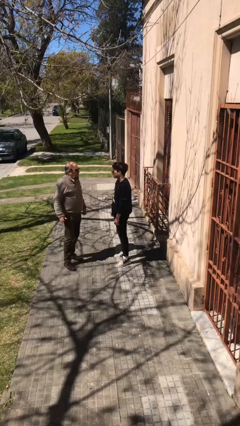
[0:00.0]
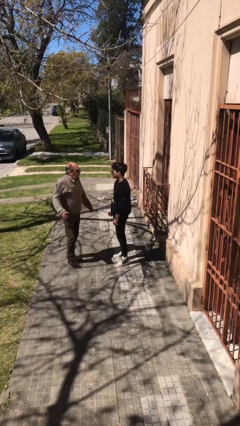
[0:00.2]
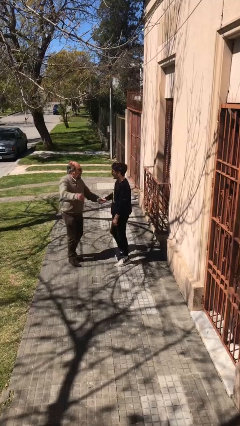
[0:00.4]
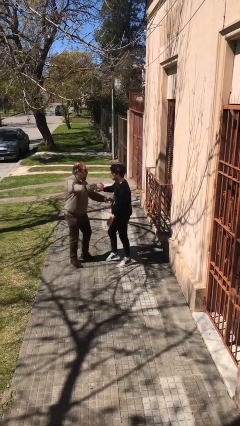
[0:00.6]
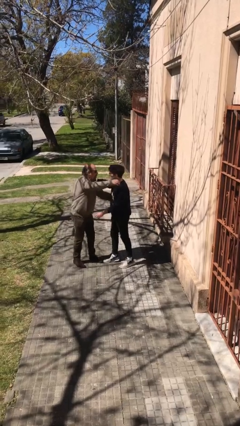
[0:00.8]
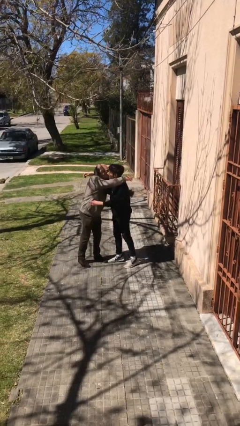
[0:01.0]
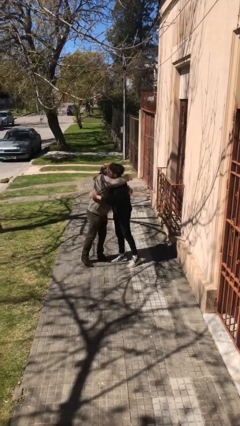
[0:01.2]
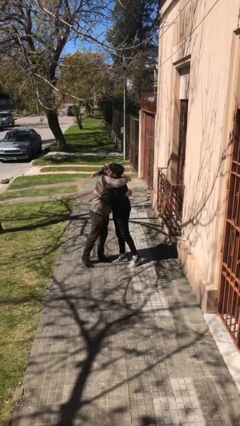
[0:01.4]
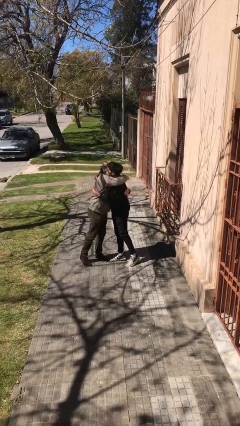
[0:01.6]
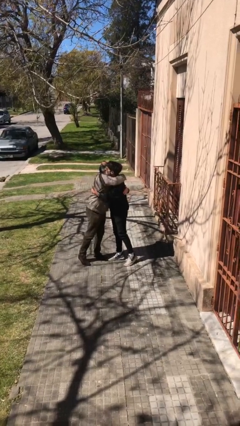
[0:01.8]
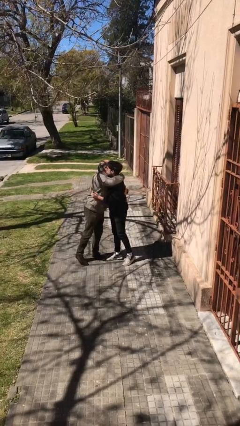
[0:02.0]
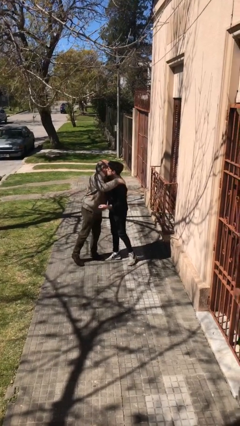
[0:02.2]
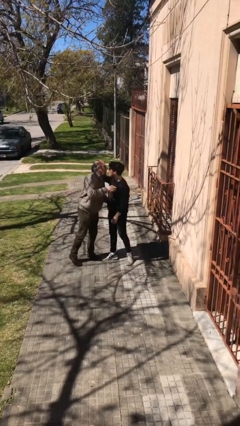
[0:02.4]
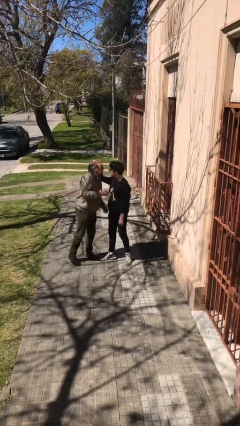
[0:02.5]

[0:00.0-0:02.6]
person embraces person

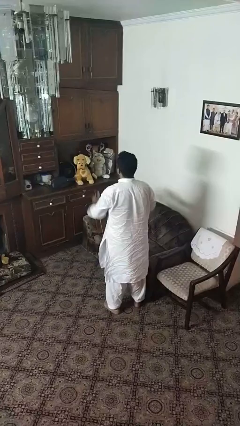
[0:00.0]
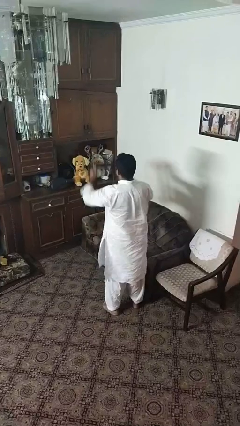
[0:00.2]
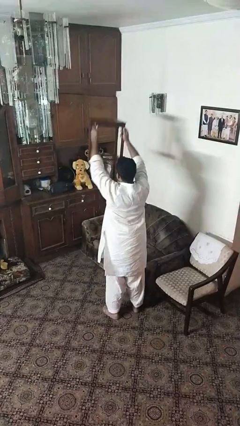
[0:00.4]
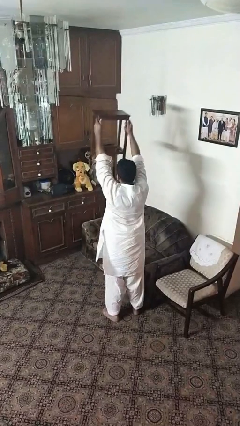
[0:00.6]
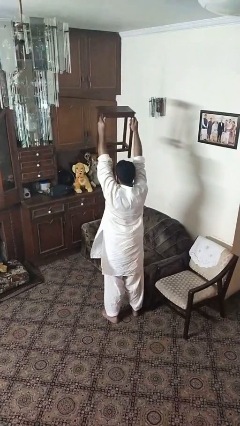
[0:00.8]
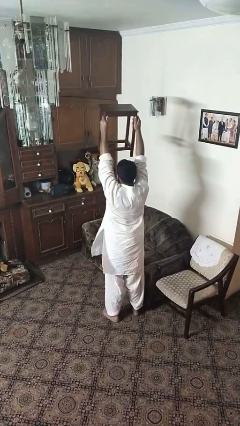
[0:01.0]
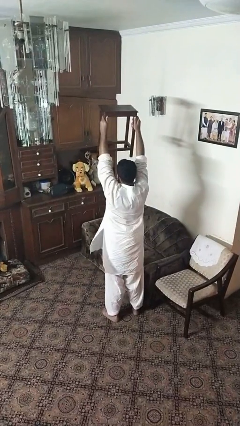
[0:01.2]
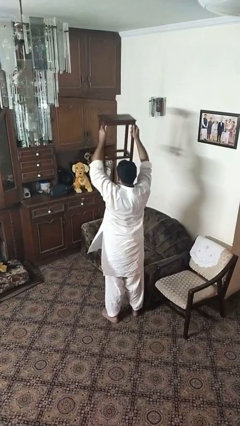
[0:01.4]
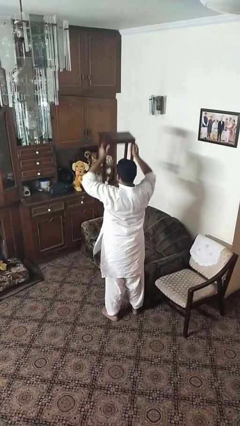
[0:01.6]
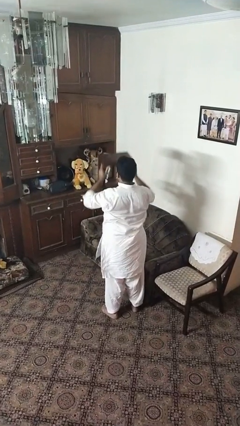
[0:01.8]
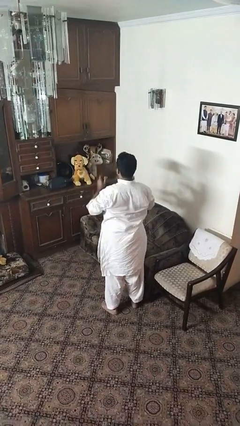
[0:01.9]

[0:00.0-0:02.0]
person holds object above head

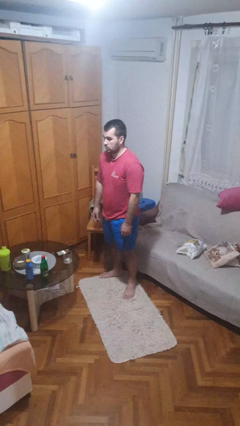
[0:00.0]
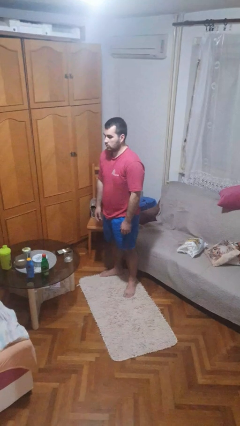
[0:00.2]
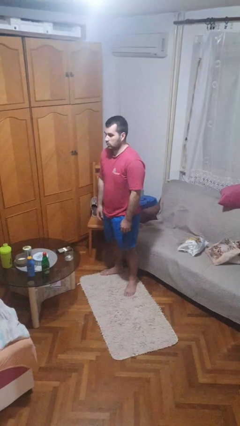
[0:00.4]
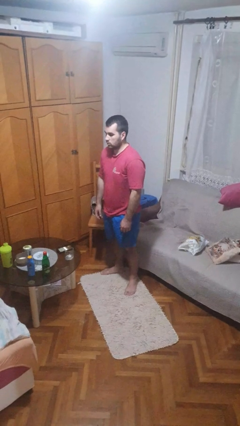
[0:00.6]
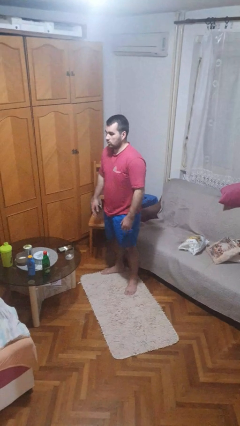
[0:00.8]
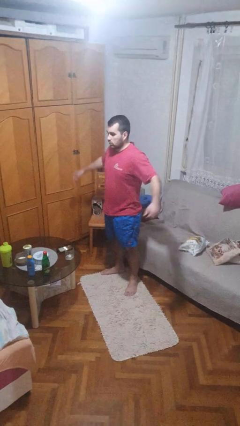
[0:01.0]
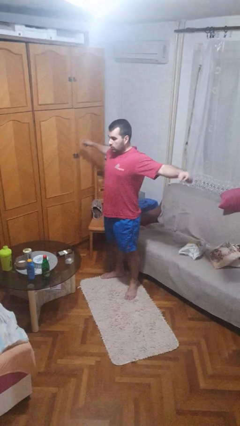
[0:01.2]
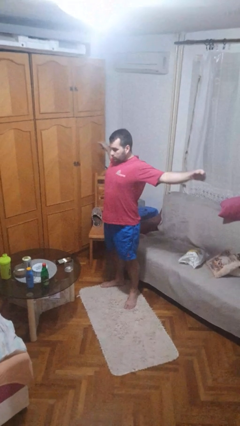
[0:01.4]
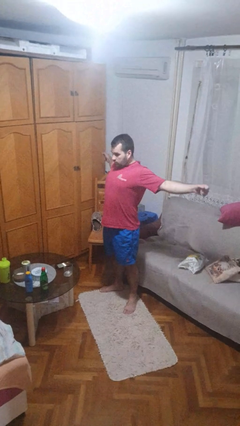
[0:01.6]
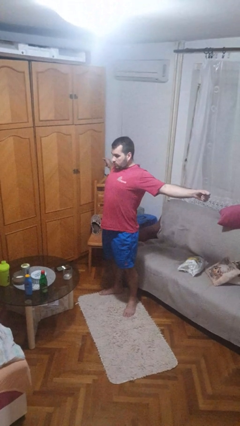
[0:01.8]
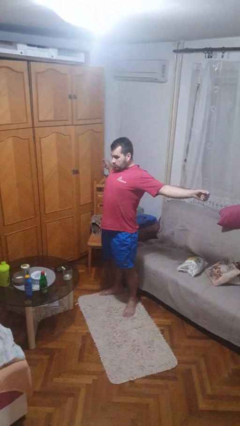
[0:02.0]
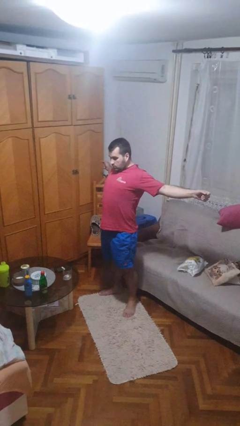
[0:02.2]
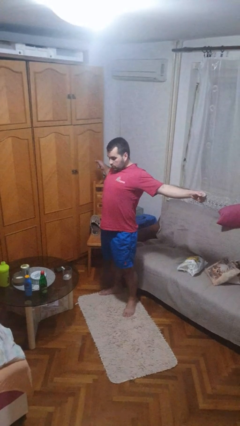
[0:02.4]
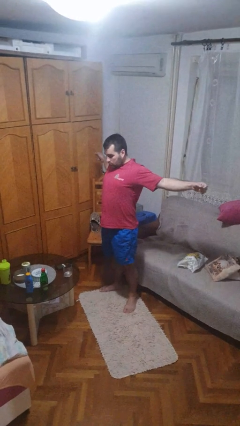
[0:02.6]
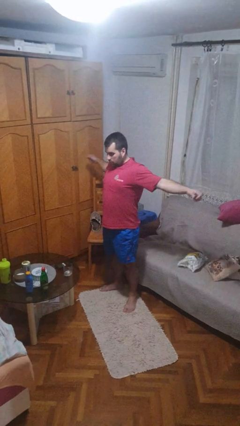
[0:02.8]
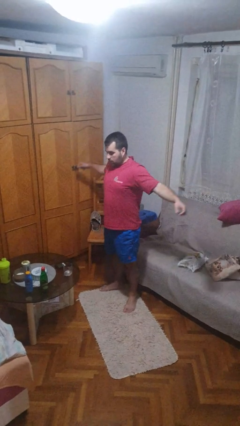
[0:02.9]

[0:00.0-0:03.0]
person stretches arms to side

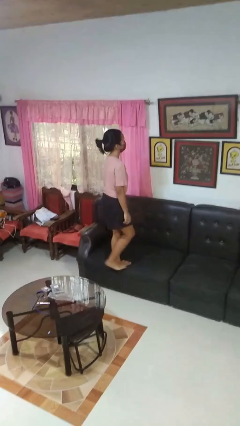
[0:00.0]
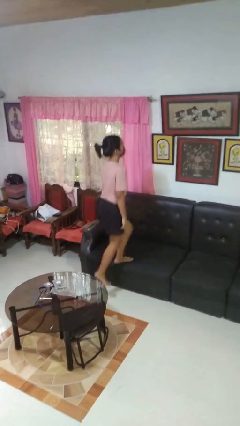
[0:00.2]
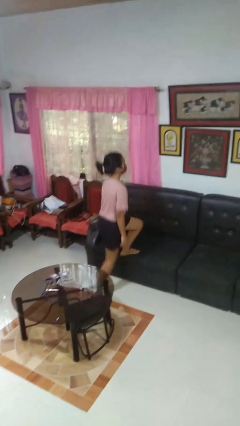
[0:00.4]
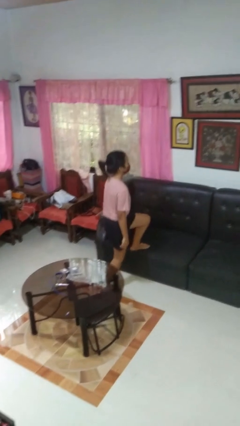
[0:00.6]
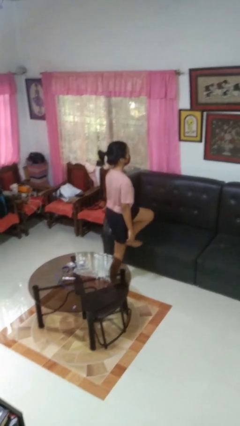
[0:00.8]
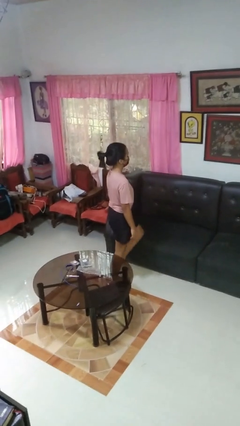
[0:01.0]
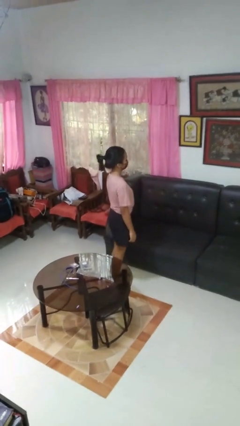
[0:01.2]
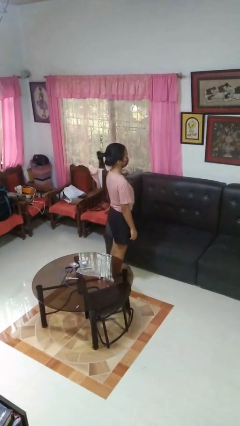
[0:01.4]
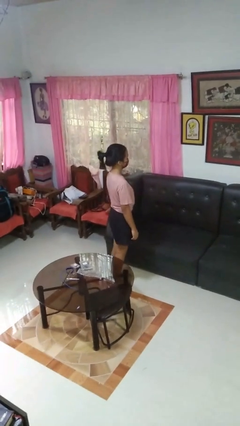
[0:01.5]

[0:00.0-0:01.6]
person climbs off couch

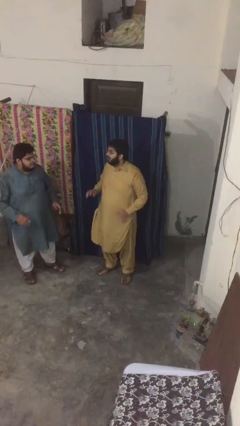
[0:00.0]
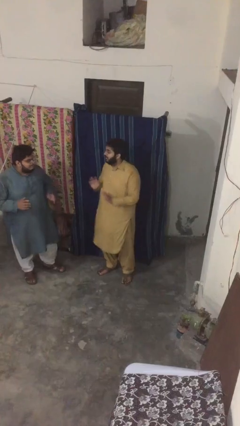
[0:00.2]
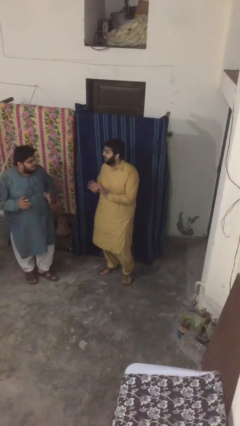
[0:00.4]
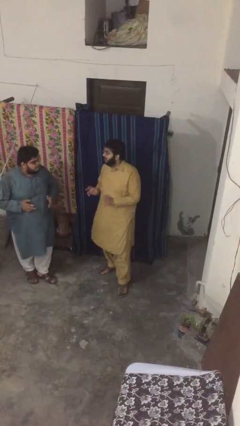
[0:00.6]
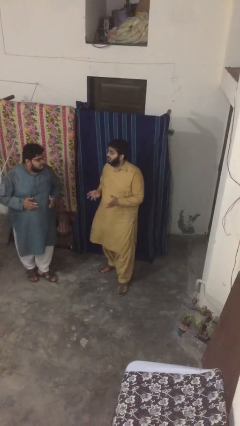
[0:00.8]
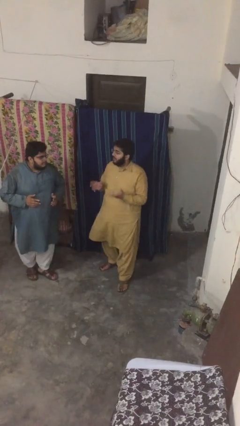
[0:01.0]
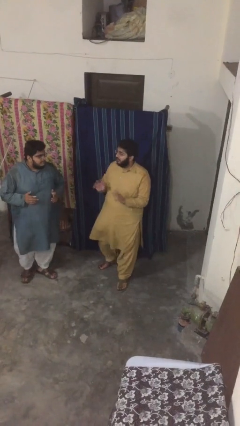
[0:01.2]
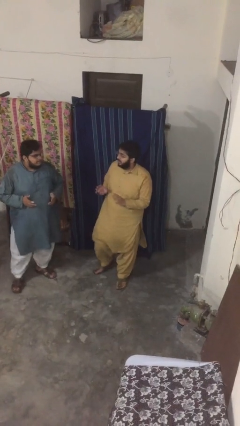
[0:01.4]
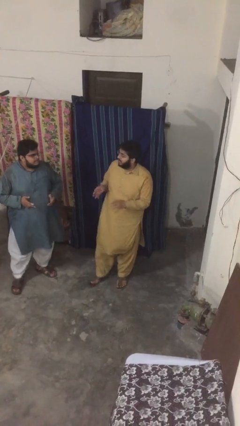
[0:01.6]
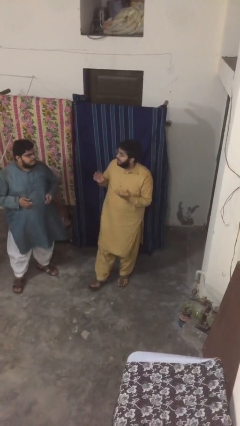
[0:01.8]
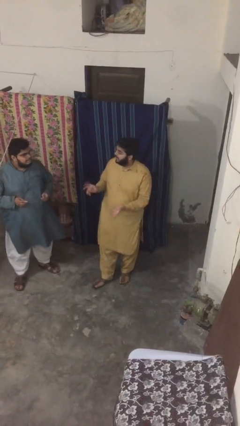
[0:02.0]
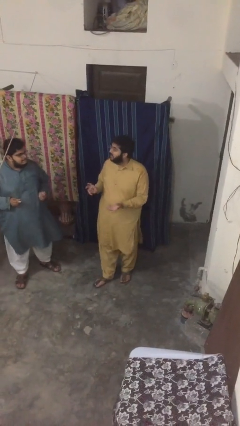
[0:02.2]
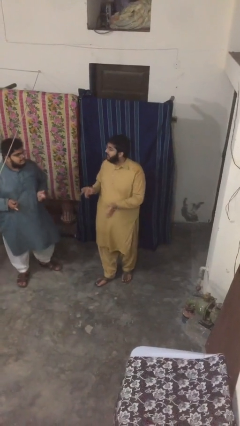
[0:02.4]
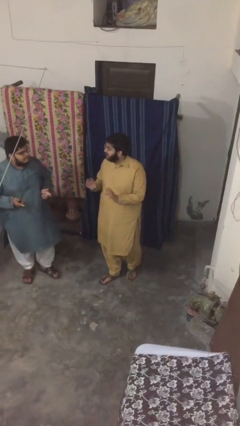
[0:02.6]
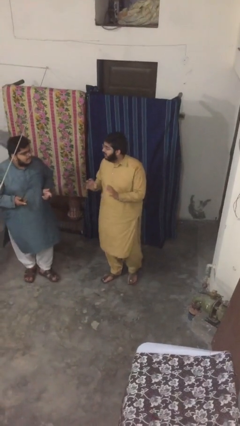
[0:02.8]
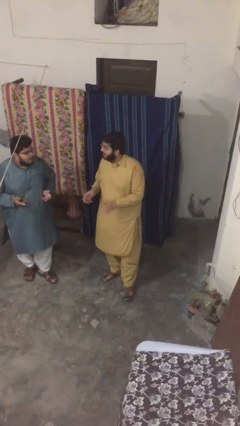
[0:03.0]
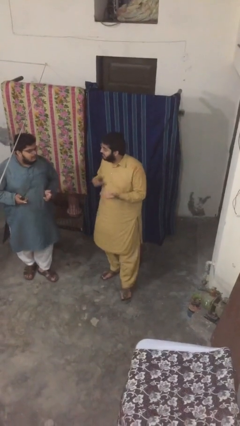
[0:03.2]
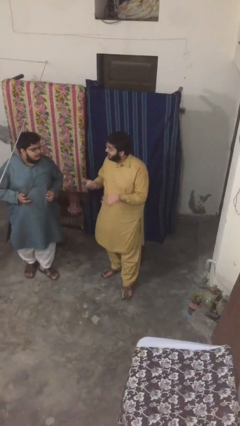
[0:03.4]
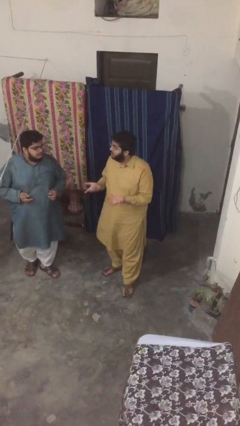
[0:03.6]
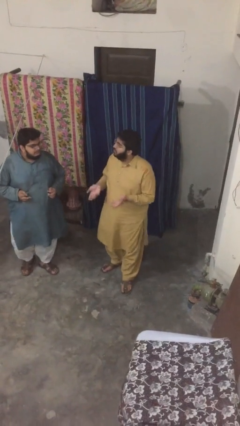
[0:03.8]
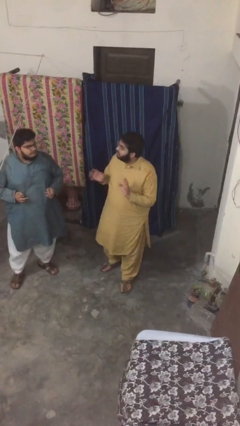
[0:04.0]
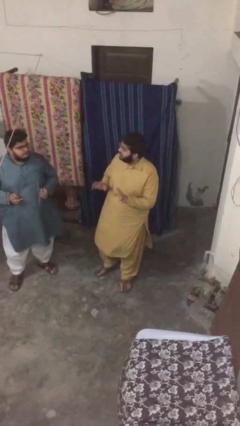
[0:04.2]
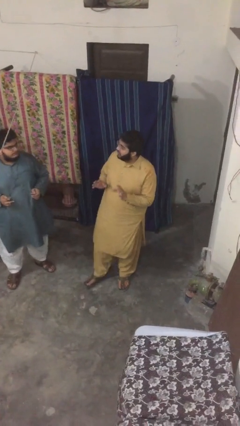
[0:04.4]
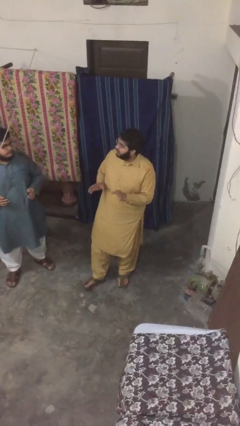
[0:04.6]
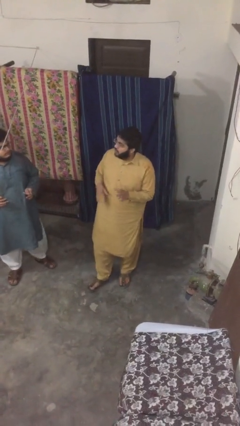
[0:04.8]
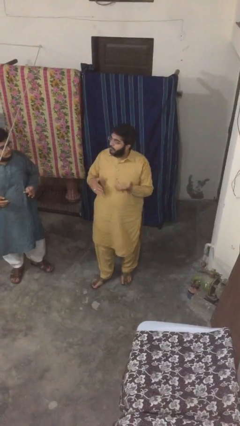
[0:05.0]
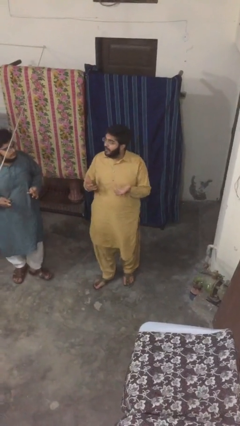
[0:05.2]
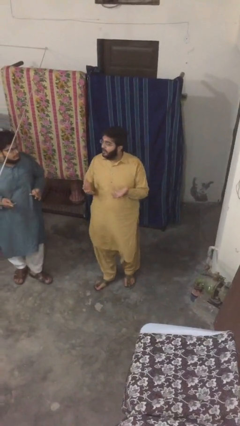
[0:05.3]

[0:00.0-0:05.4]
person talks to person

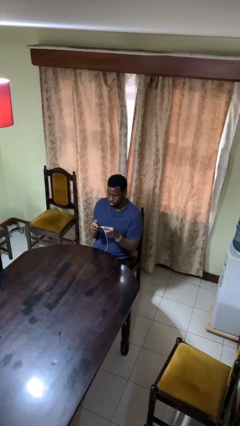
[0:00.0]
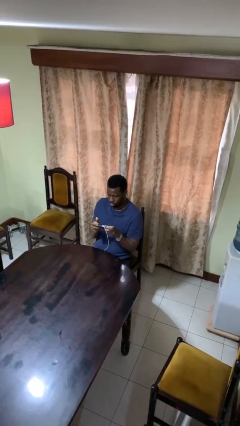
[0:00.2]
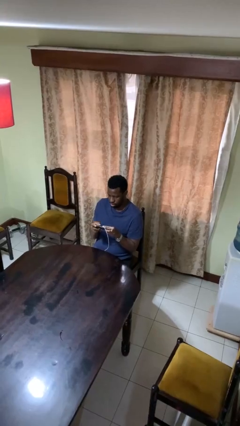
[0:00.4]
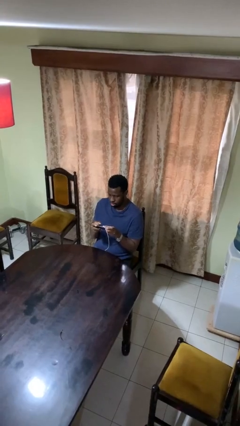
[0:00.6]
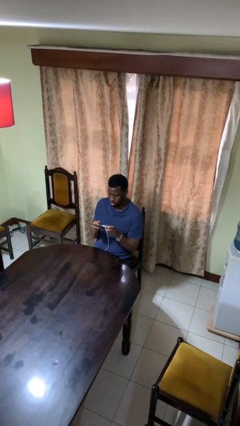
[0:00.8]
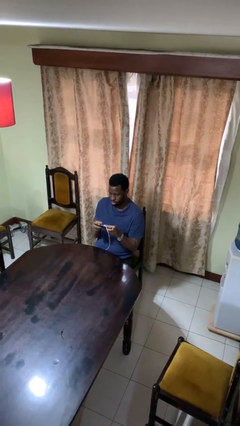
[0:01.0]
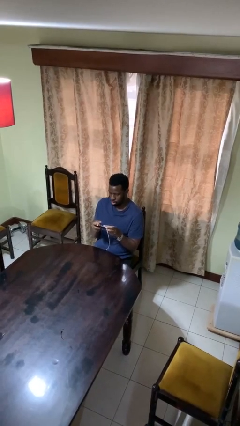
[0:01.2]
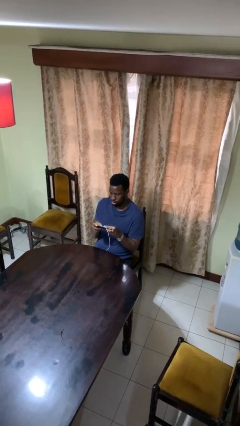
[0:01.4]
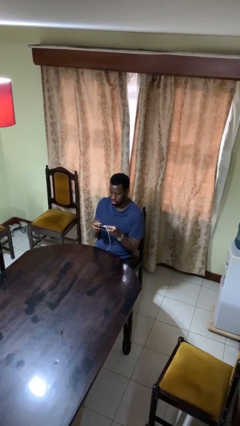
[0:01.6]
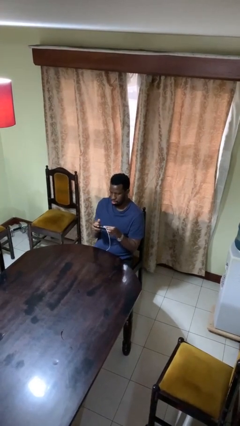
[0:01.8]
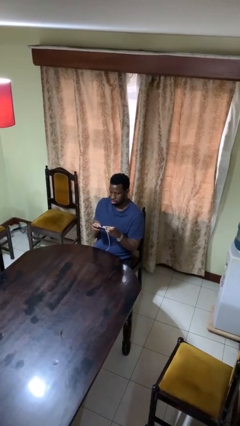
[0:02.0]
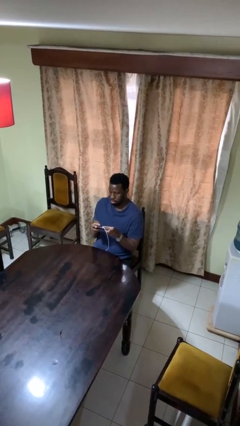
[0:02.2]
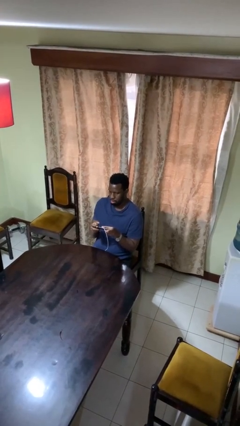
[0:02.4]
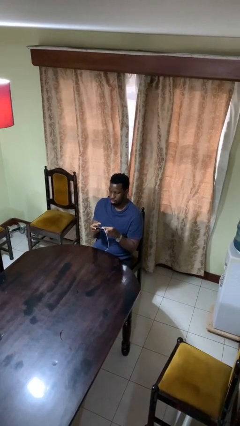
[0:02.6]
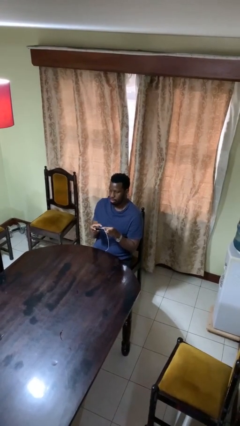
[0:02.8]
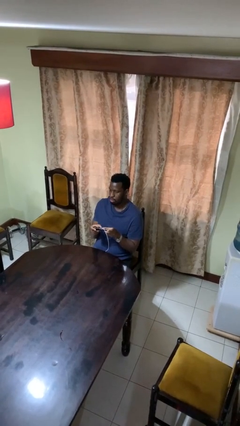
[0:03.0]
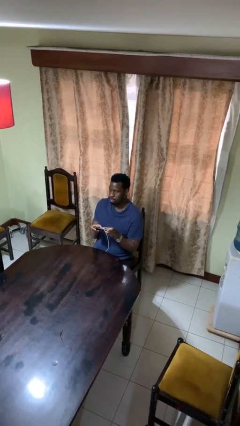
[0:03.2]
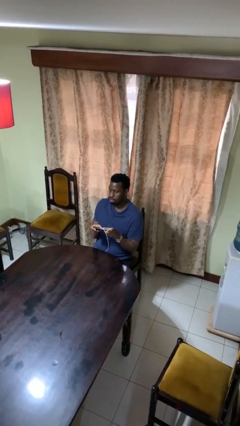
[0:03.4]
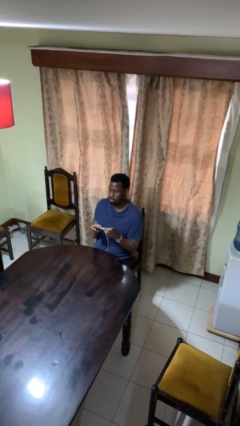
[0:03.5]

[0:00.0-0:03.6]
person interacts with handheld game
